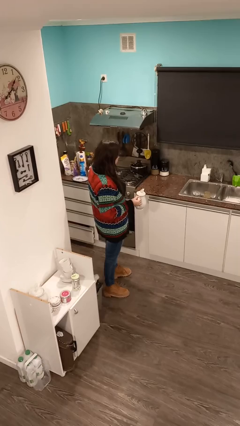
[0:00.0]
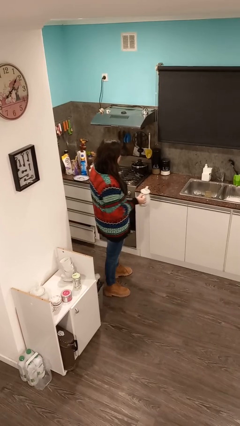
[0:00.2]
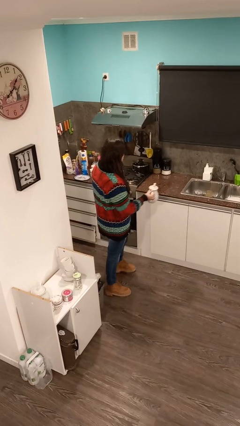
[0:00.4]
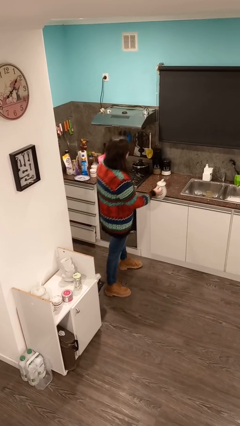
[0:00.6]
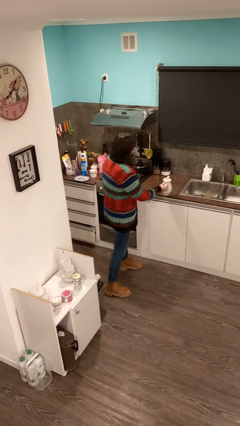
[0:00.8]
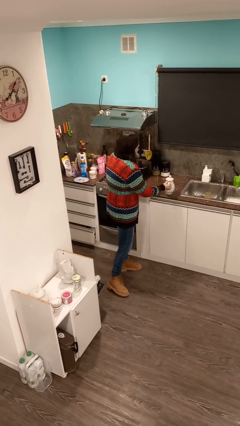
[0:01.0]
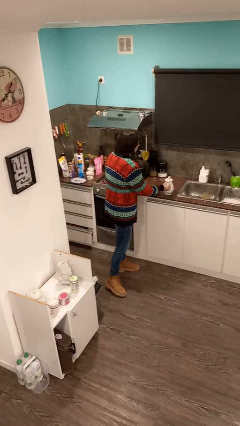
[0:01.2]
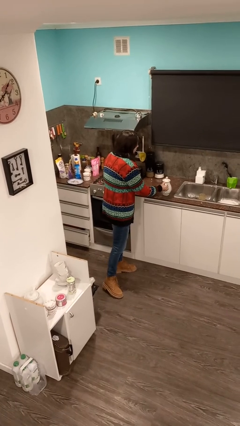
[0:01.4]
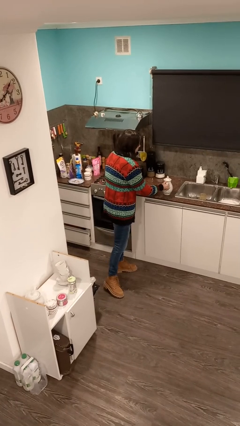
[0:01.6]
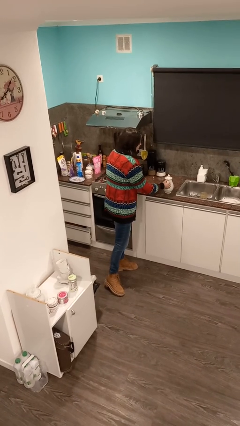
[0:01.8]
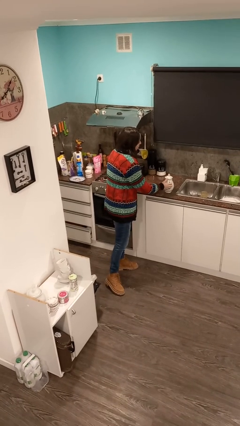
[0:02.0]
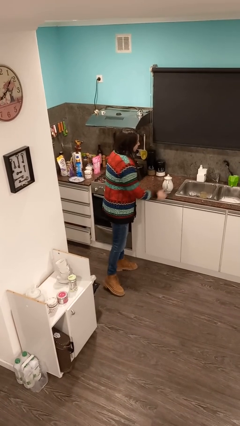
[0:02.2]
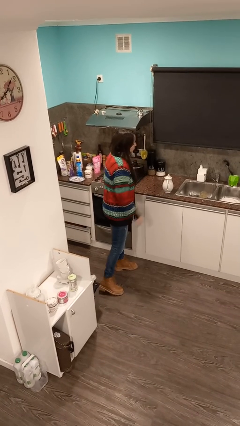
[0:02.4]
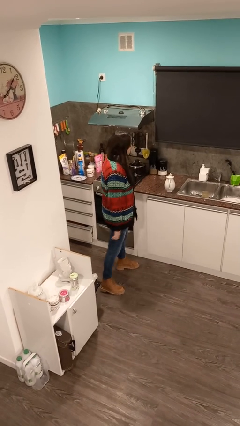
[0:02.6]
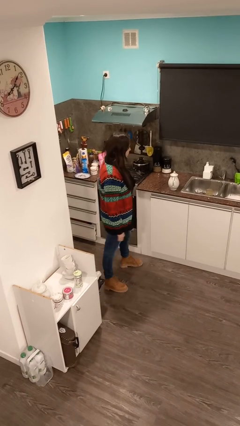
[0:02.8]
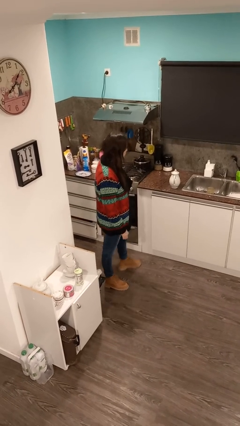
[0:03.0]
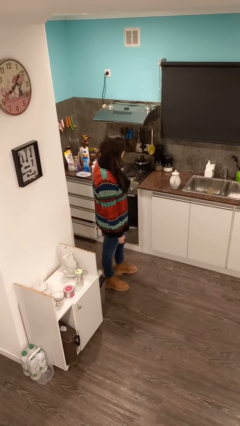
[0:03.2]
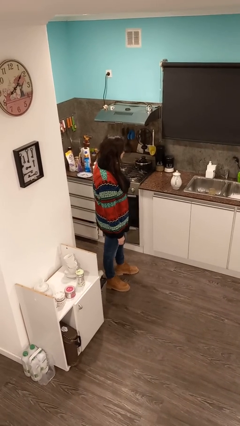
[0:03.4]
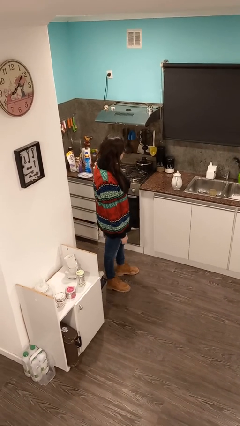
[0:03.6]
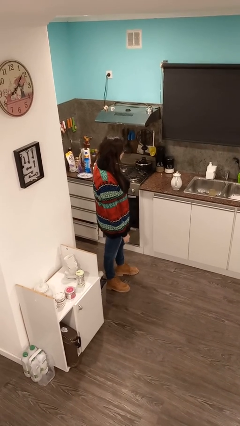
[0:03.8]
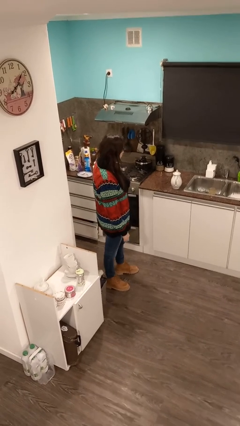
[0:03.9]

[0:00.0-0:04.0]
person puts down object on countertop

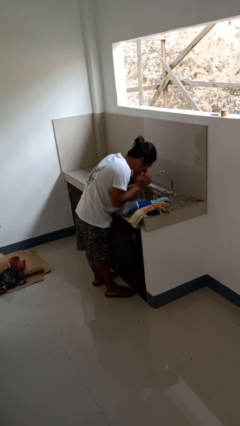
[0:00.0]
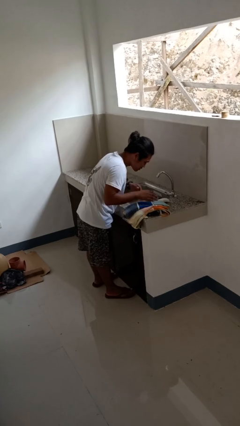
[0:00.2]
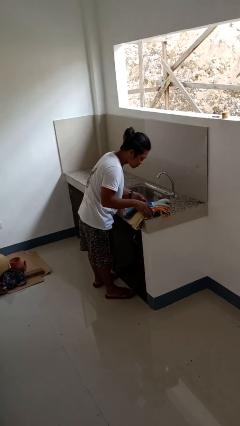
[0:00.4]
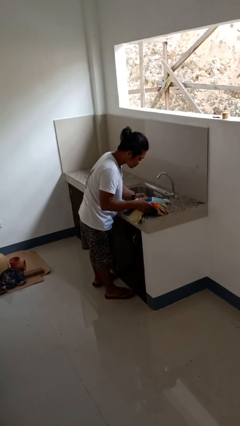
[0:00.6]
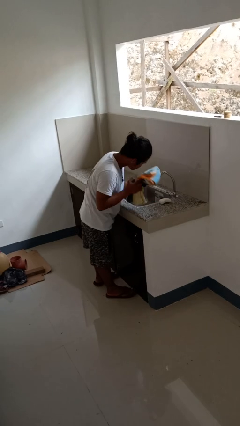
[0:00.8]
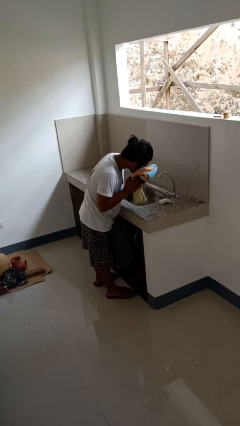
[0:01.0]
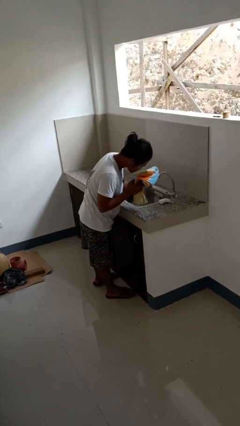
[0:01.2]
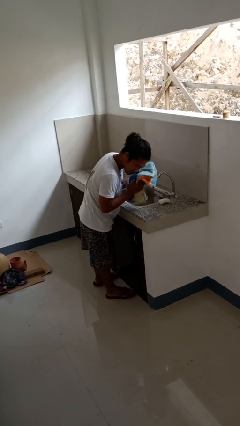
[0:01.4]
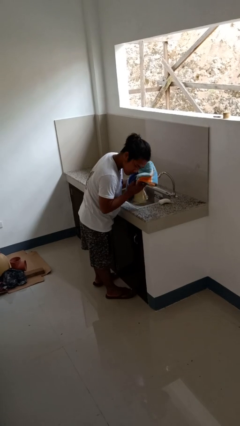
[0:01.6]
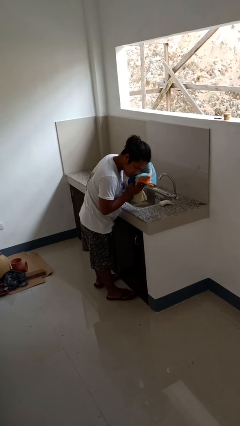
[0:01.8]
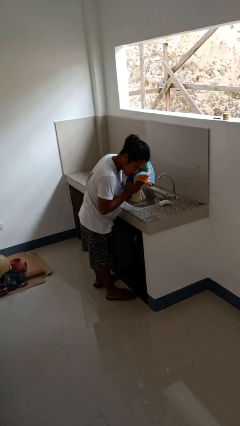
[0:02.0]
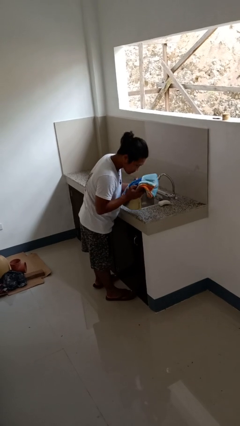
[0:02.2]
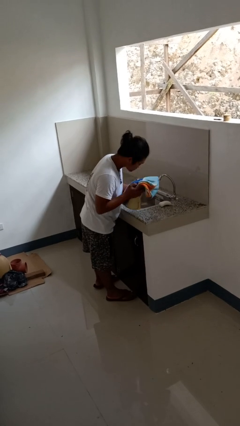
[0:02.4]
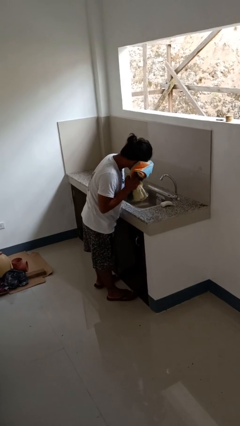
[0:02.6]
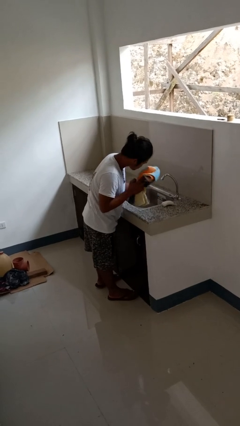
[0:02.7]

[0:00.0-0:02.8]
person dries face with towel

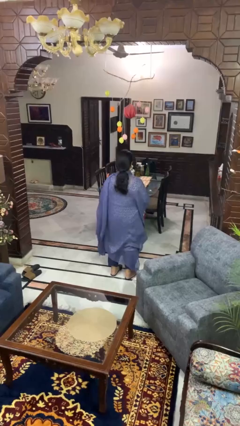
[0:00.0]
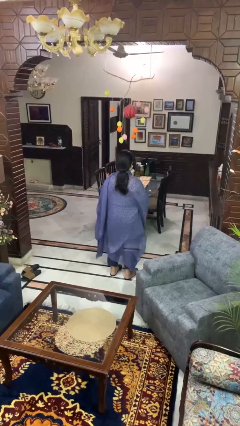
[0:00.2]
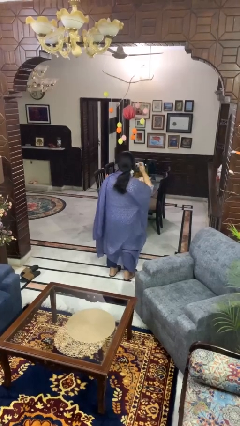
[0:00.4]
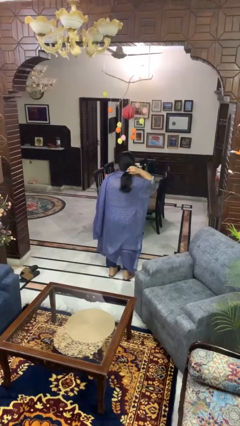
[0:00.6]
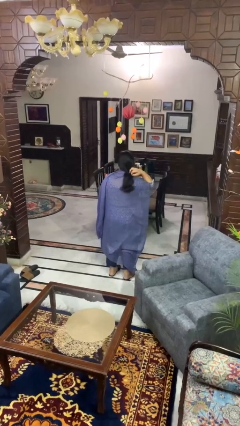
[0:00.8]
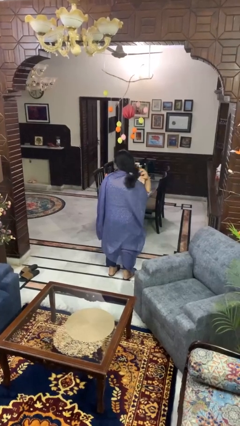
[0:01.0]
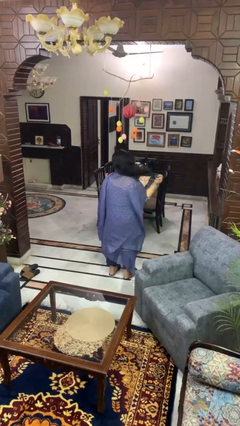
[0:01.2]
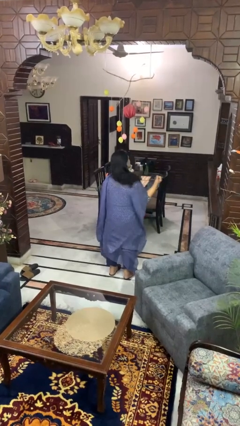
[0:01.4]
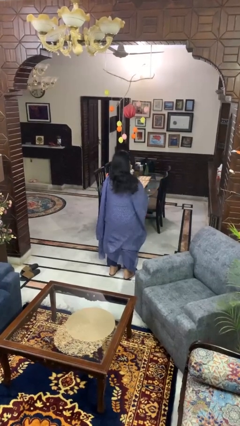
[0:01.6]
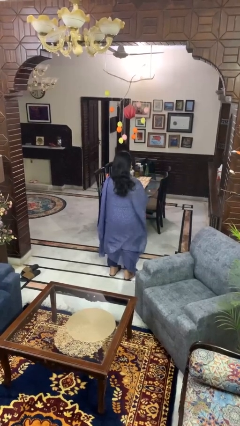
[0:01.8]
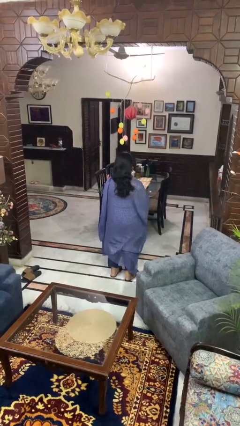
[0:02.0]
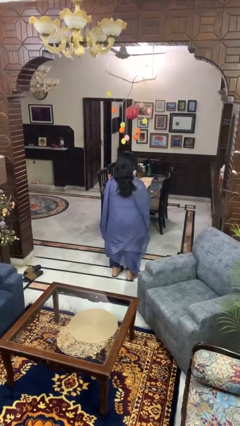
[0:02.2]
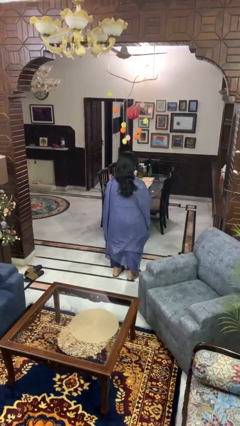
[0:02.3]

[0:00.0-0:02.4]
person takes off hairtie

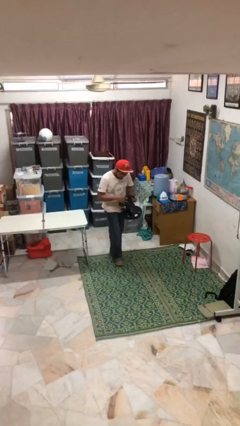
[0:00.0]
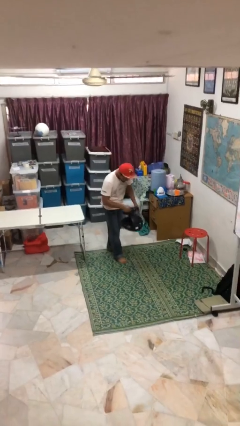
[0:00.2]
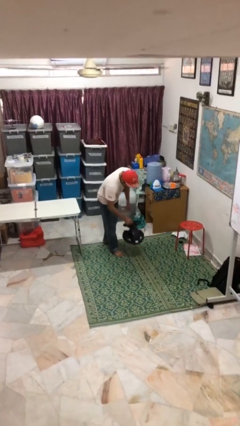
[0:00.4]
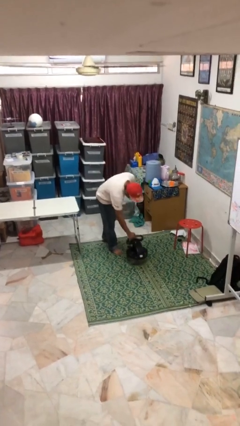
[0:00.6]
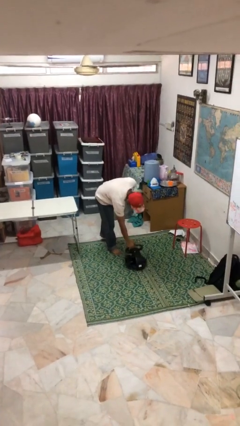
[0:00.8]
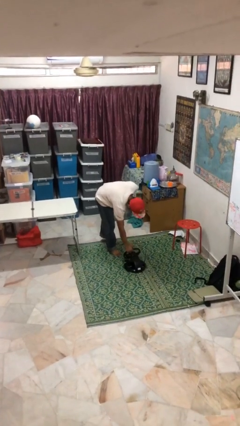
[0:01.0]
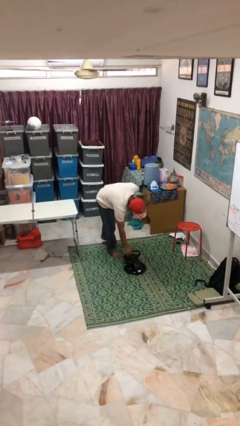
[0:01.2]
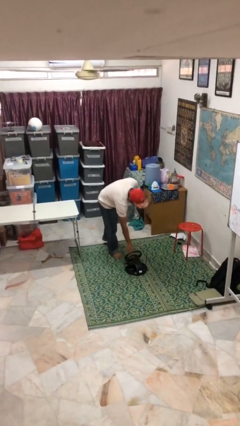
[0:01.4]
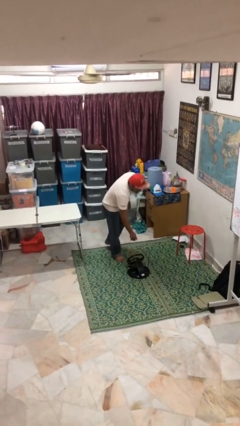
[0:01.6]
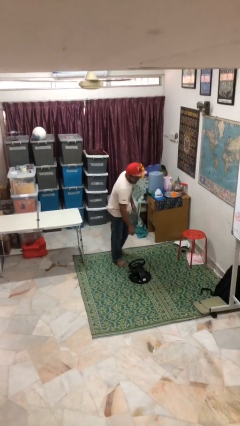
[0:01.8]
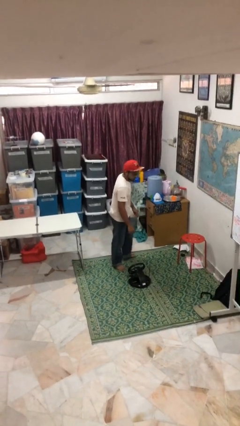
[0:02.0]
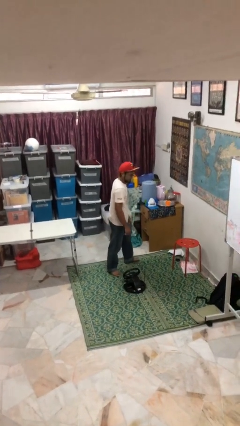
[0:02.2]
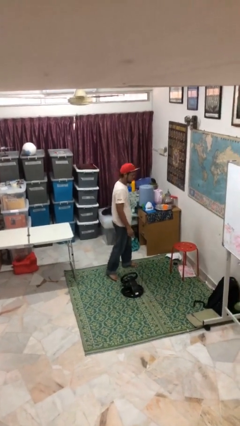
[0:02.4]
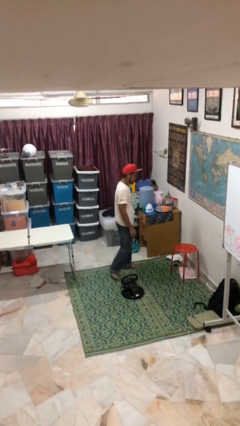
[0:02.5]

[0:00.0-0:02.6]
person puts down object on floor

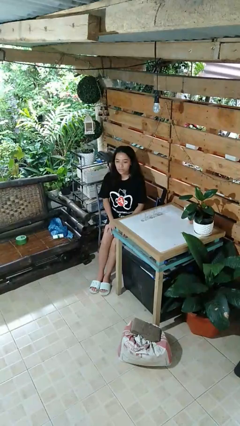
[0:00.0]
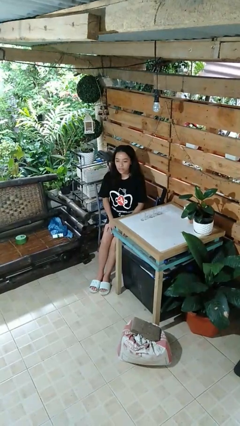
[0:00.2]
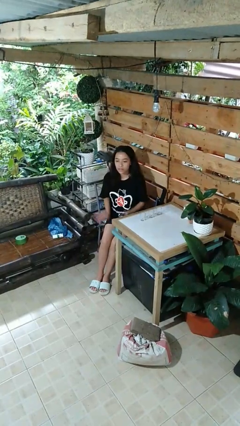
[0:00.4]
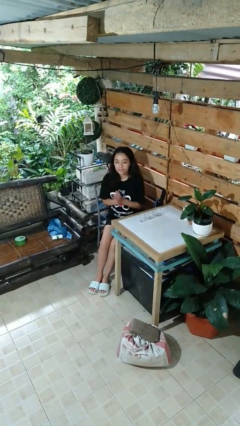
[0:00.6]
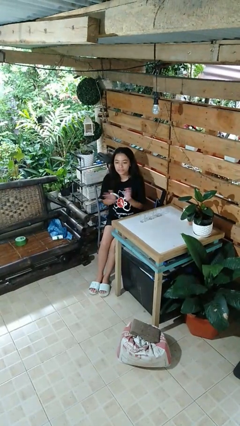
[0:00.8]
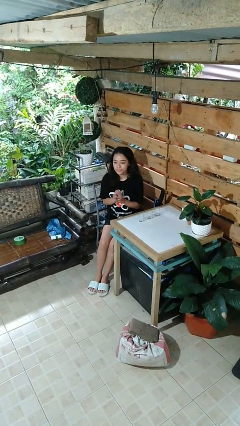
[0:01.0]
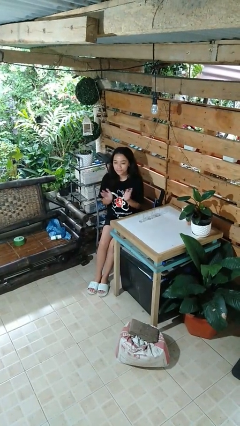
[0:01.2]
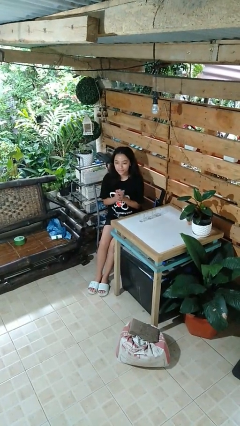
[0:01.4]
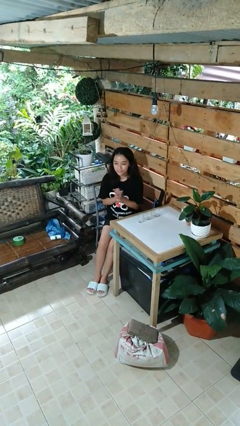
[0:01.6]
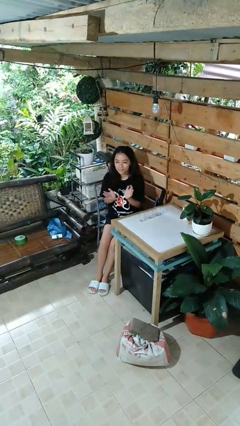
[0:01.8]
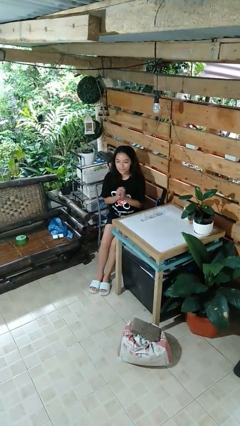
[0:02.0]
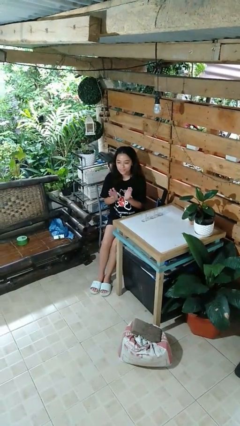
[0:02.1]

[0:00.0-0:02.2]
person claps hands

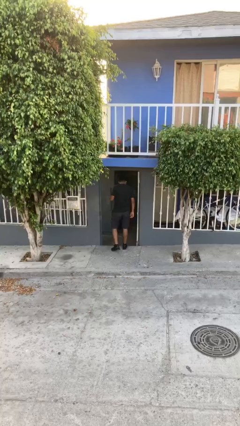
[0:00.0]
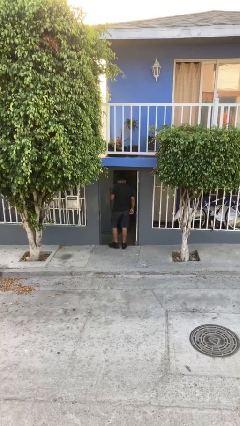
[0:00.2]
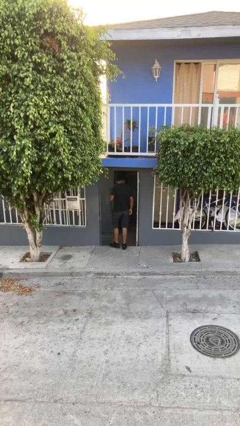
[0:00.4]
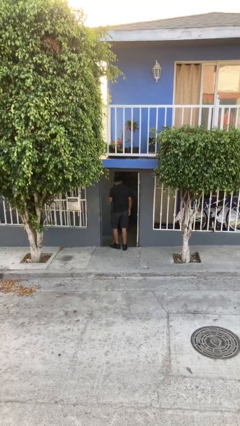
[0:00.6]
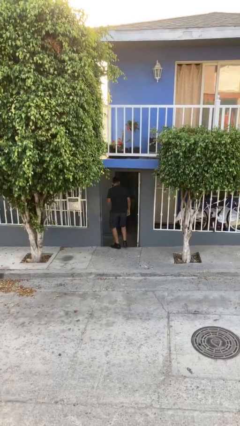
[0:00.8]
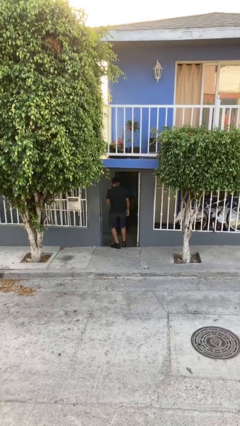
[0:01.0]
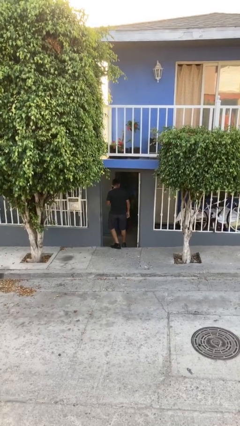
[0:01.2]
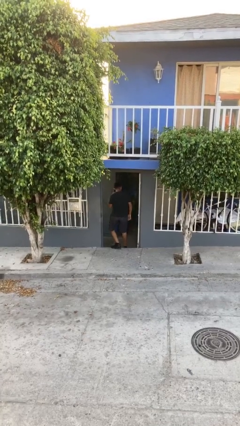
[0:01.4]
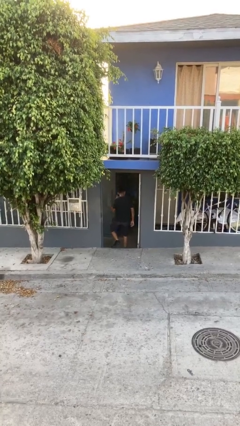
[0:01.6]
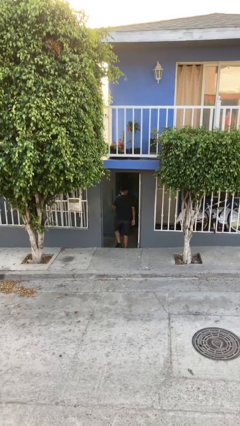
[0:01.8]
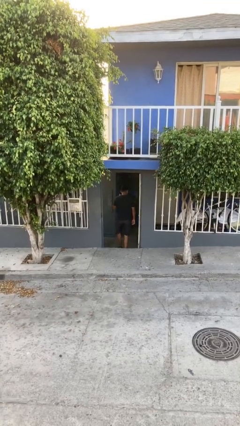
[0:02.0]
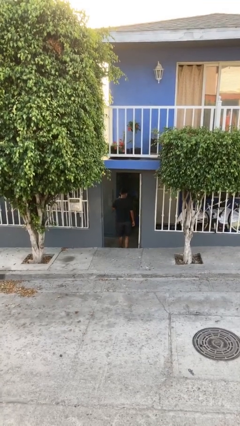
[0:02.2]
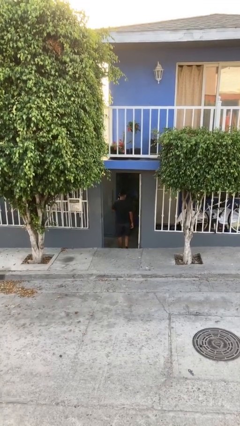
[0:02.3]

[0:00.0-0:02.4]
person exits scene through structure

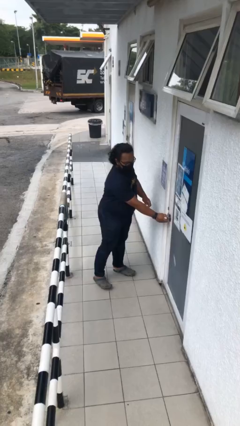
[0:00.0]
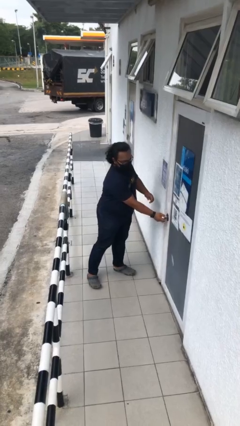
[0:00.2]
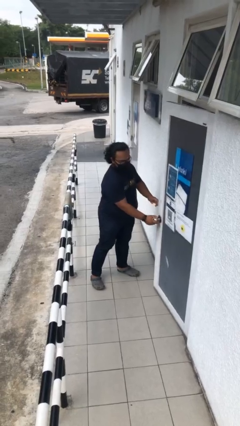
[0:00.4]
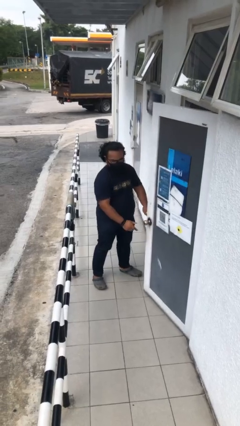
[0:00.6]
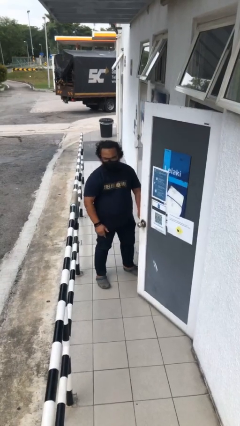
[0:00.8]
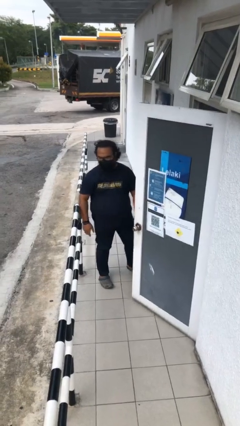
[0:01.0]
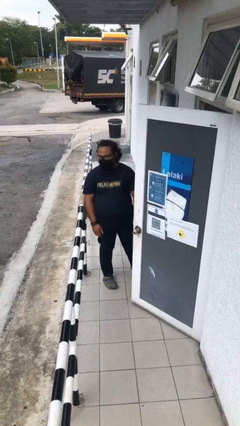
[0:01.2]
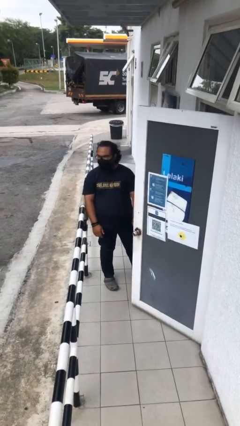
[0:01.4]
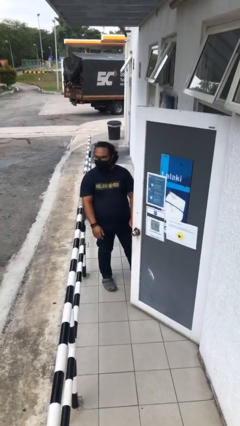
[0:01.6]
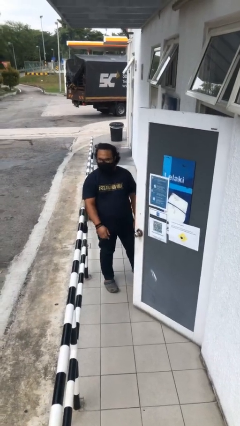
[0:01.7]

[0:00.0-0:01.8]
person opens facility door
